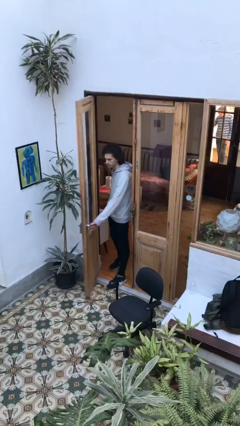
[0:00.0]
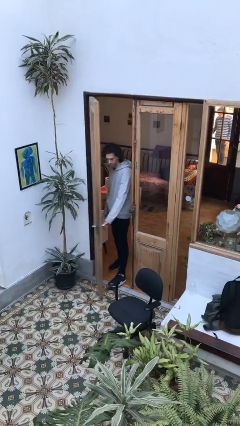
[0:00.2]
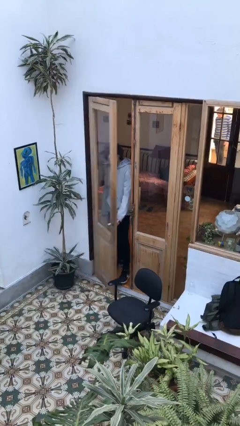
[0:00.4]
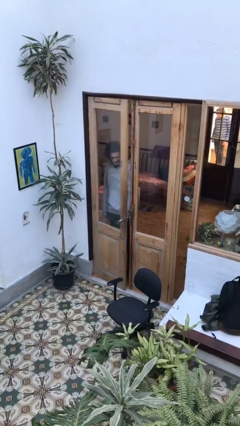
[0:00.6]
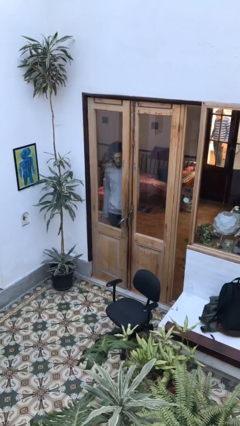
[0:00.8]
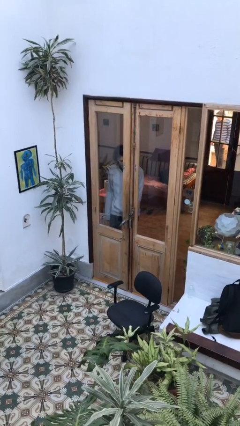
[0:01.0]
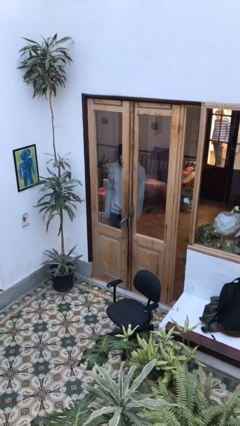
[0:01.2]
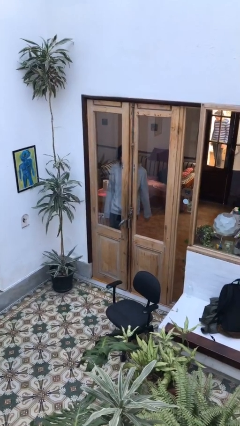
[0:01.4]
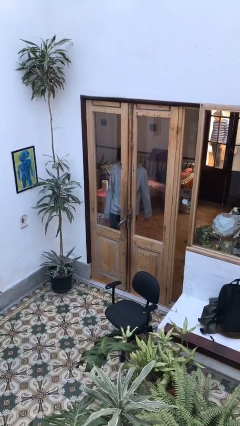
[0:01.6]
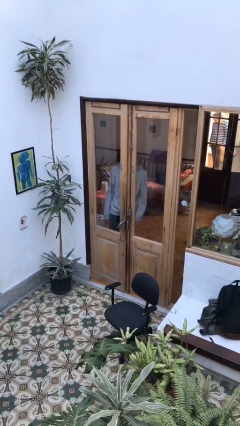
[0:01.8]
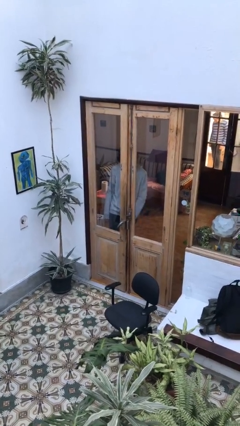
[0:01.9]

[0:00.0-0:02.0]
person closes facility door

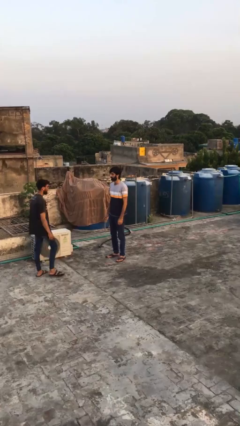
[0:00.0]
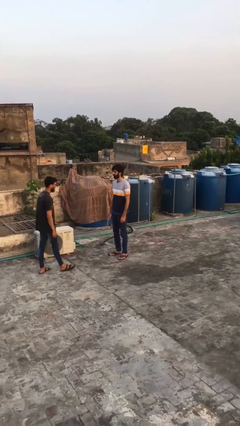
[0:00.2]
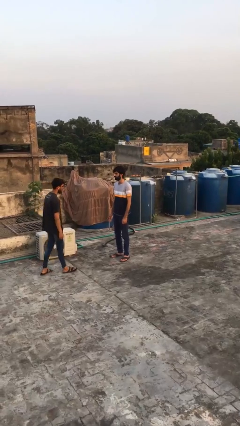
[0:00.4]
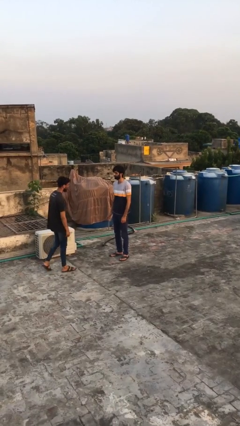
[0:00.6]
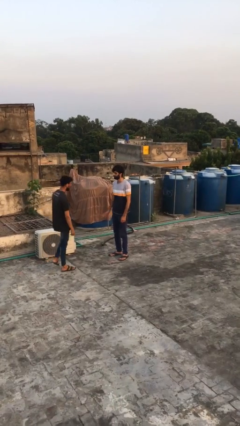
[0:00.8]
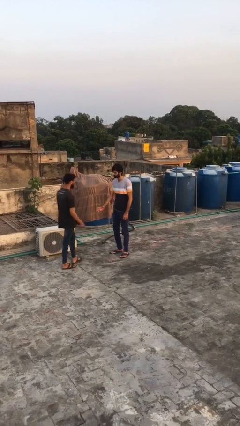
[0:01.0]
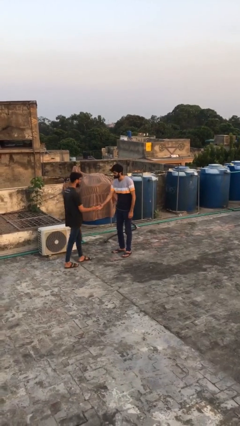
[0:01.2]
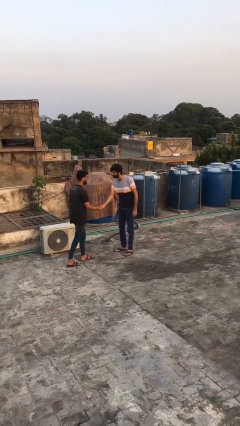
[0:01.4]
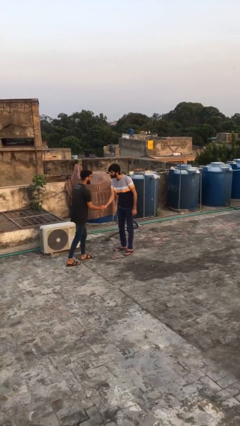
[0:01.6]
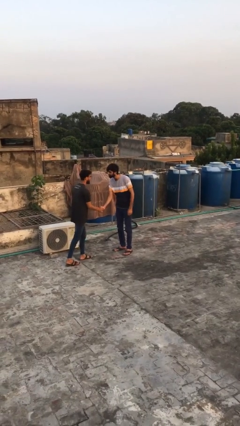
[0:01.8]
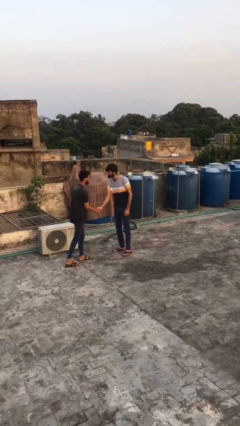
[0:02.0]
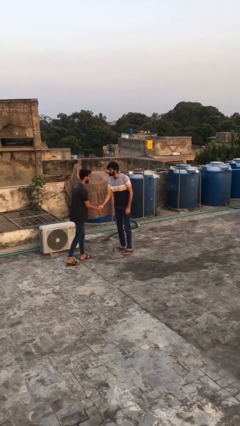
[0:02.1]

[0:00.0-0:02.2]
person shakes hand

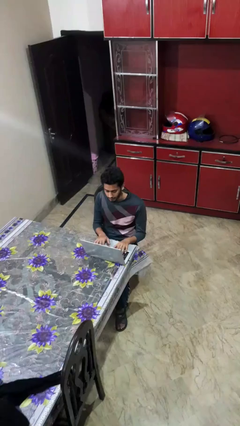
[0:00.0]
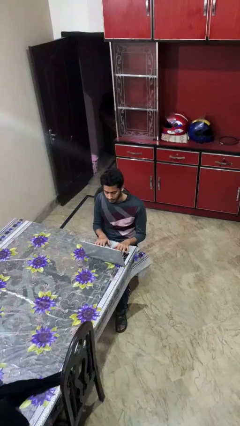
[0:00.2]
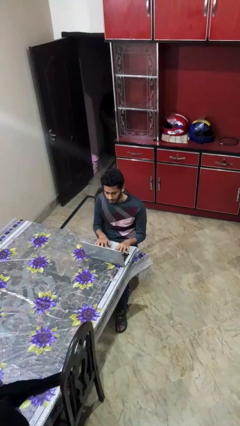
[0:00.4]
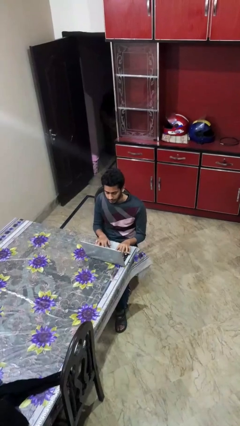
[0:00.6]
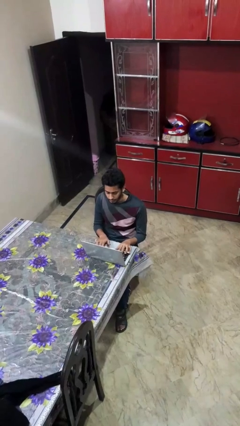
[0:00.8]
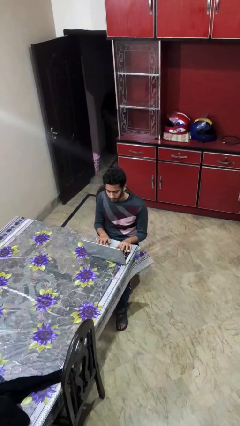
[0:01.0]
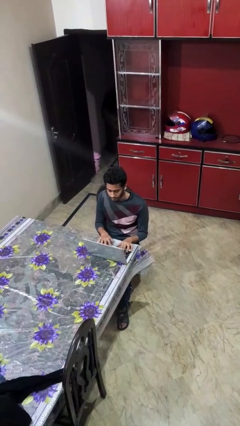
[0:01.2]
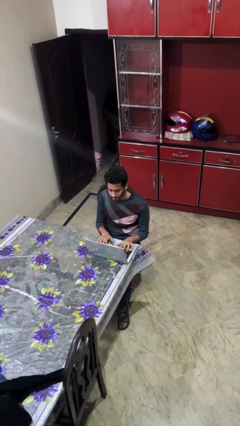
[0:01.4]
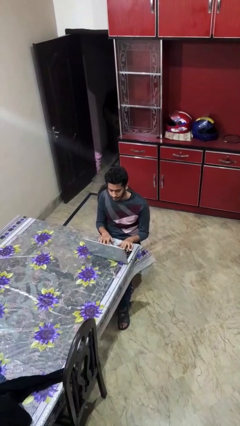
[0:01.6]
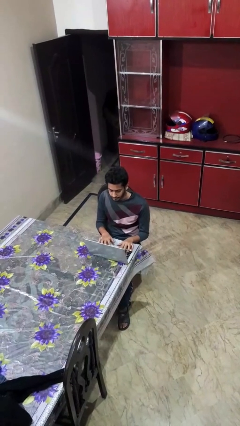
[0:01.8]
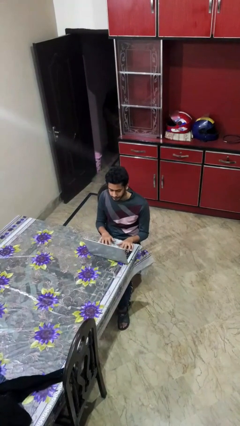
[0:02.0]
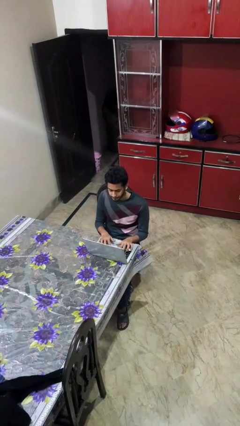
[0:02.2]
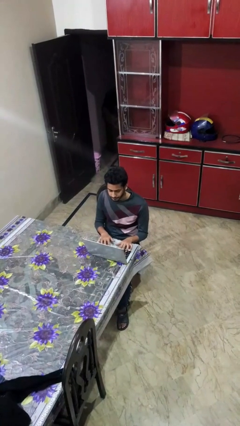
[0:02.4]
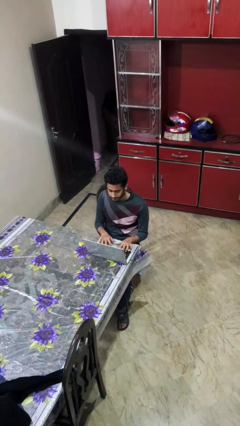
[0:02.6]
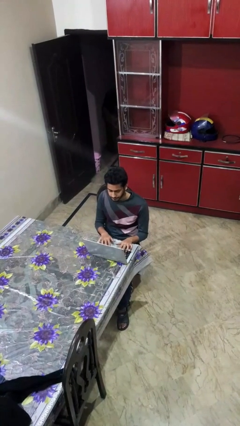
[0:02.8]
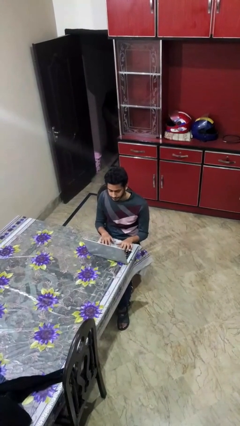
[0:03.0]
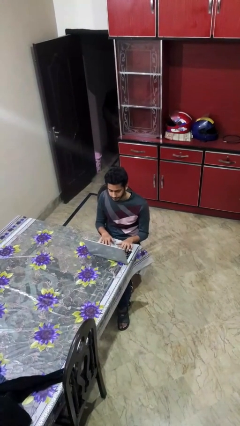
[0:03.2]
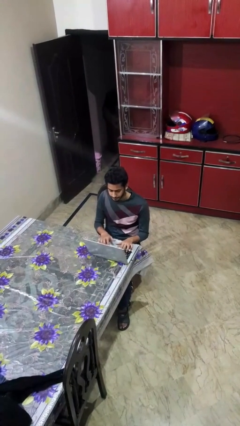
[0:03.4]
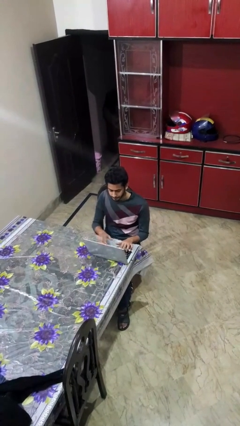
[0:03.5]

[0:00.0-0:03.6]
person interacts with laptop

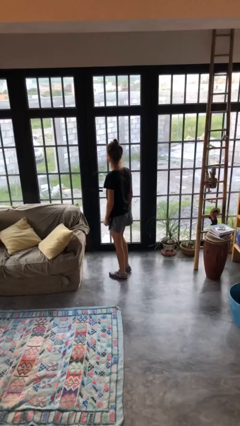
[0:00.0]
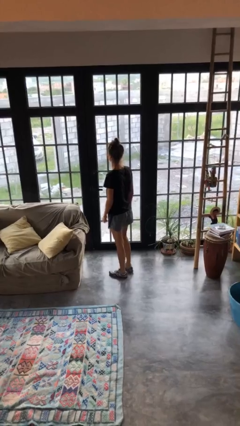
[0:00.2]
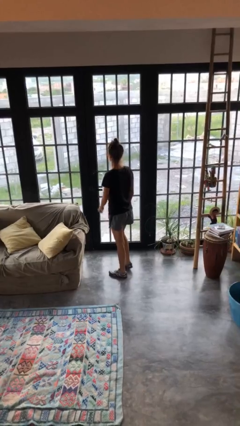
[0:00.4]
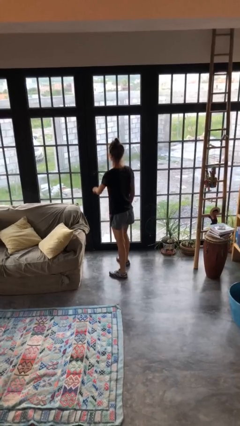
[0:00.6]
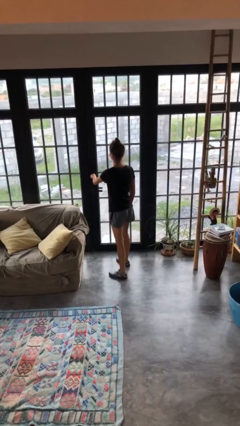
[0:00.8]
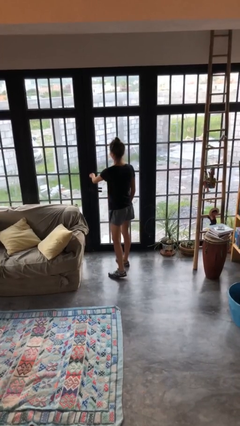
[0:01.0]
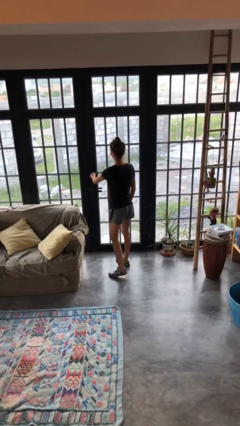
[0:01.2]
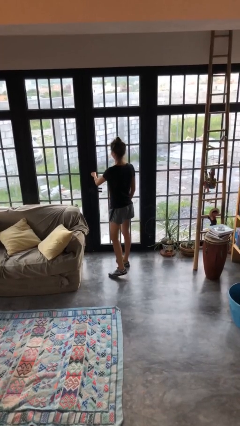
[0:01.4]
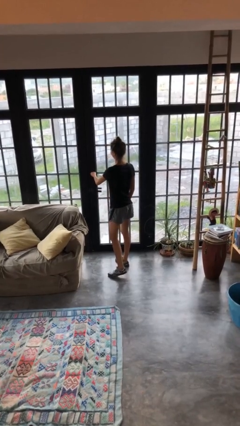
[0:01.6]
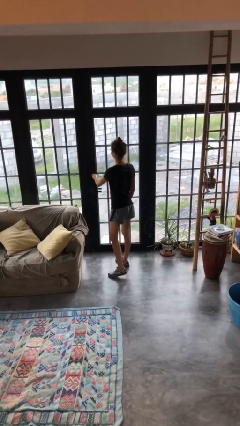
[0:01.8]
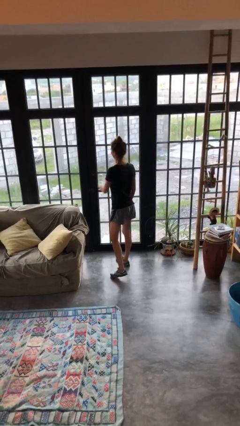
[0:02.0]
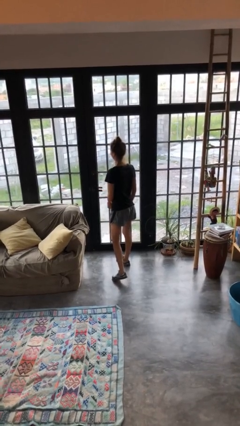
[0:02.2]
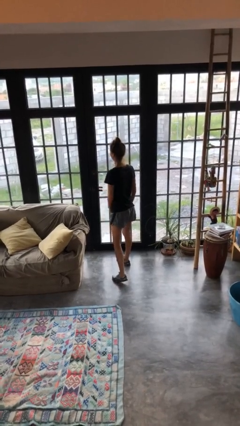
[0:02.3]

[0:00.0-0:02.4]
person locks door with keys

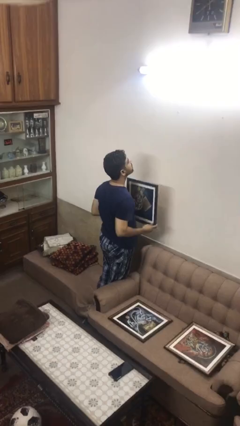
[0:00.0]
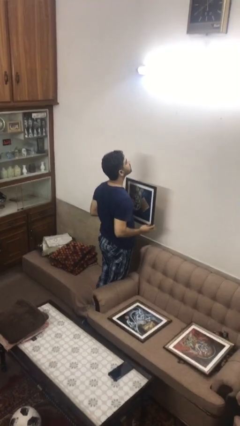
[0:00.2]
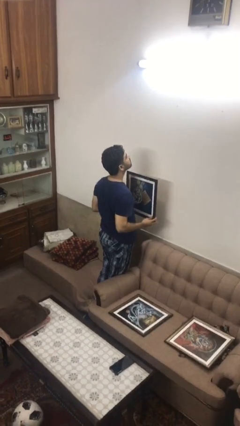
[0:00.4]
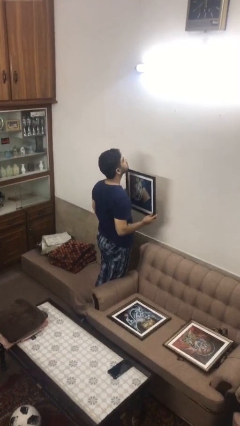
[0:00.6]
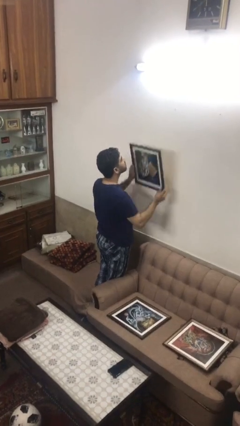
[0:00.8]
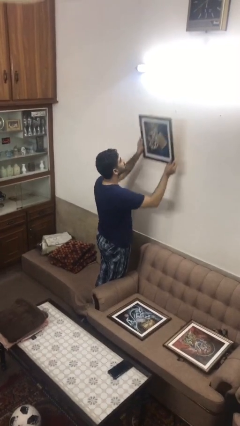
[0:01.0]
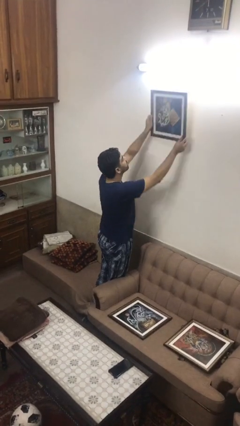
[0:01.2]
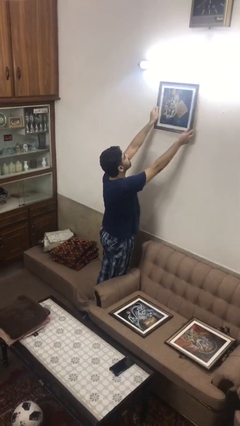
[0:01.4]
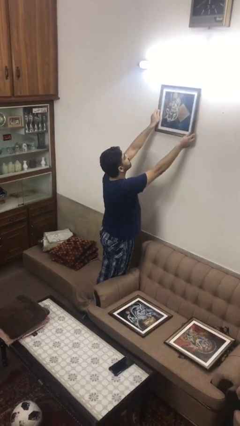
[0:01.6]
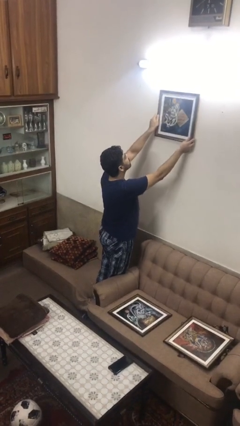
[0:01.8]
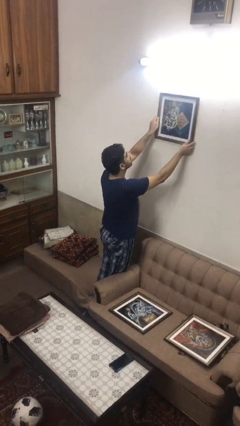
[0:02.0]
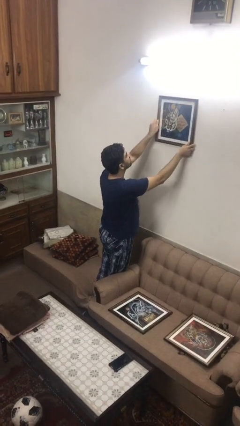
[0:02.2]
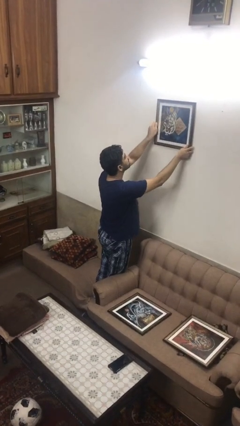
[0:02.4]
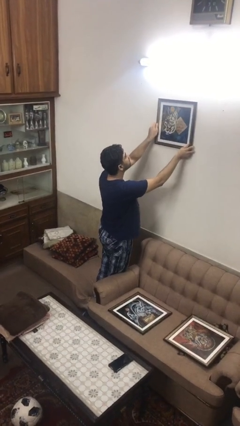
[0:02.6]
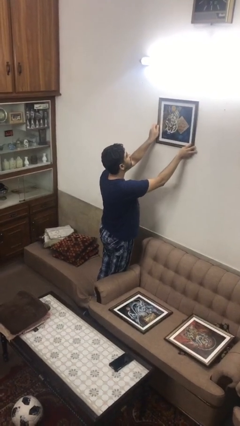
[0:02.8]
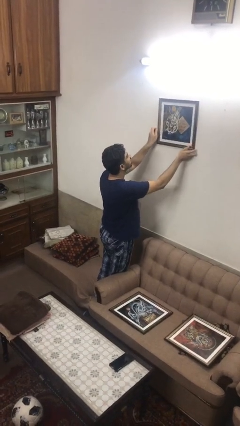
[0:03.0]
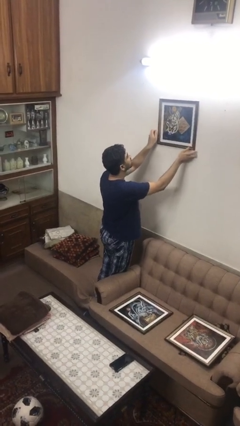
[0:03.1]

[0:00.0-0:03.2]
person puts up picture frame

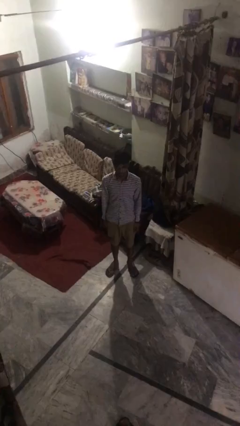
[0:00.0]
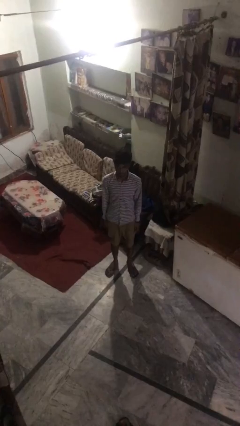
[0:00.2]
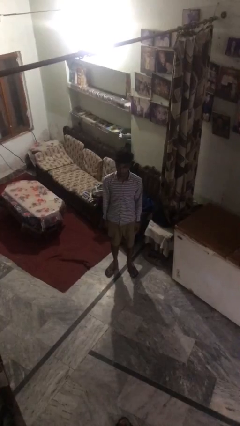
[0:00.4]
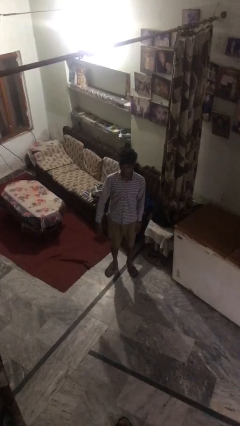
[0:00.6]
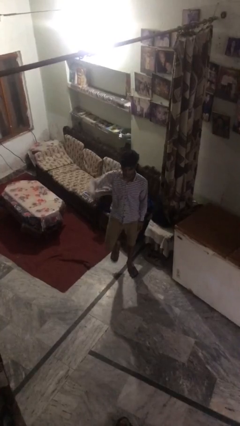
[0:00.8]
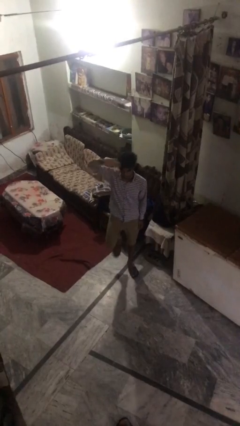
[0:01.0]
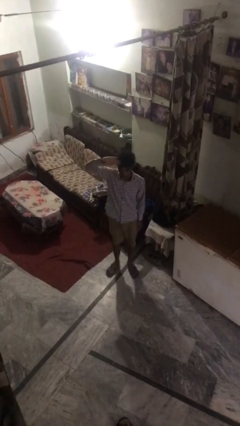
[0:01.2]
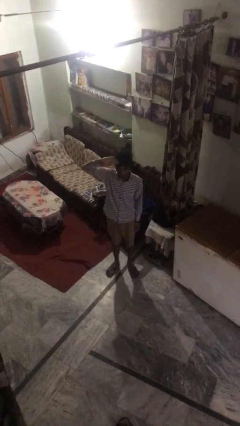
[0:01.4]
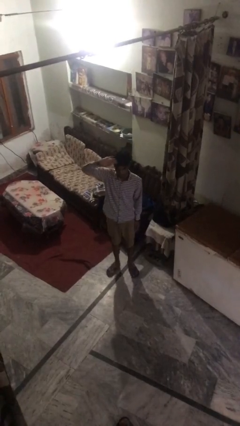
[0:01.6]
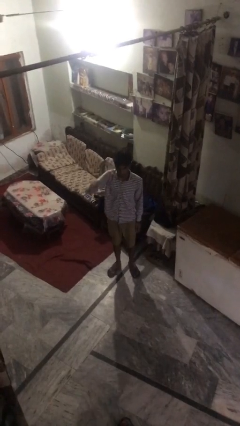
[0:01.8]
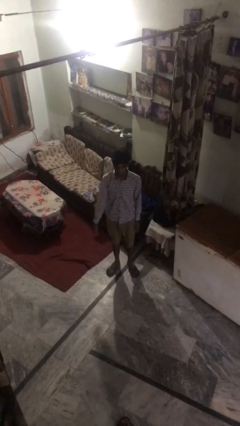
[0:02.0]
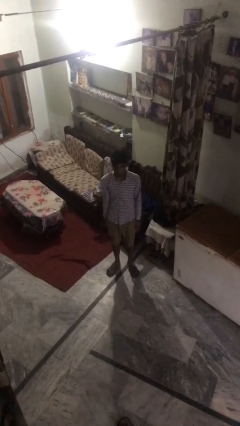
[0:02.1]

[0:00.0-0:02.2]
person salutes

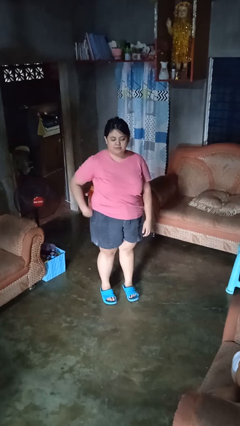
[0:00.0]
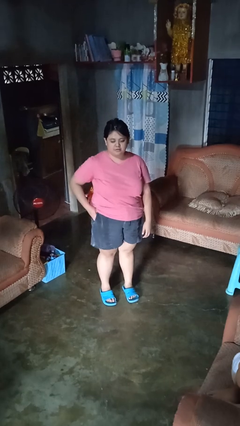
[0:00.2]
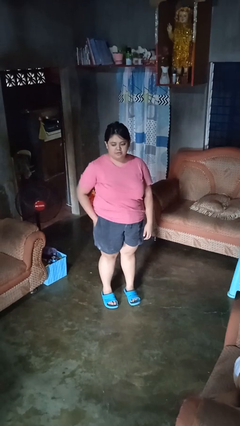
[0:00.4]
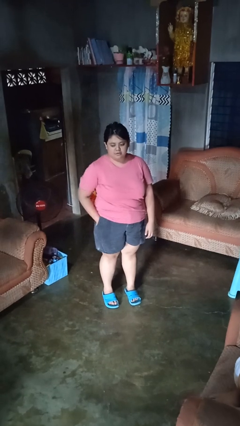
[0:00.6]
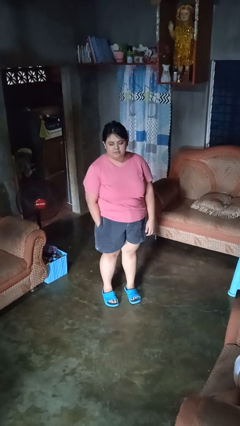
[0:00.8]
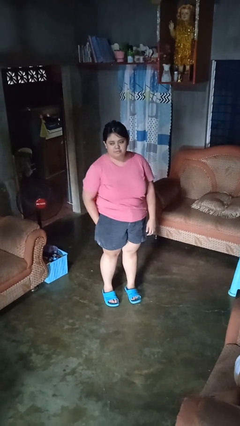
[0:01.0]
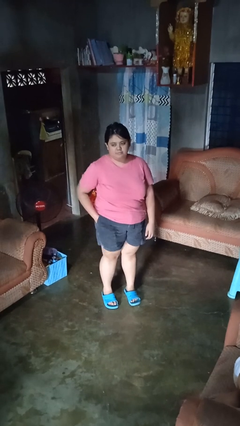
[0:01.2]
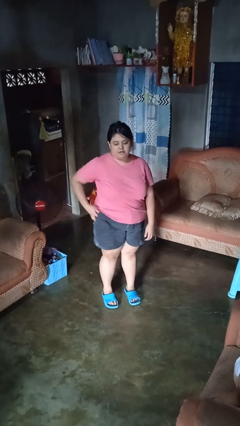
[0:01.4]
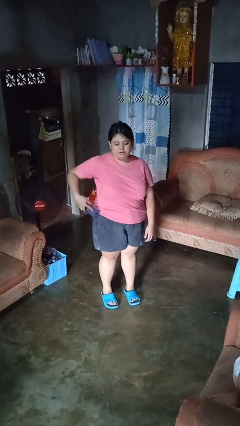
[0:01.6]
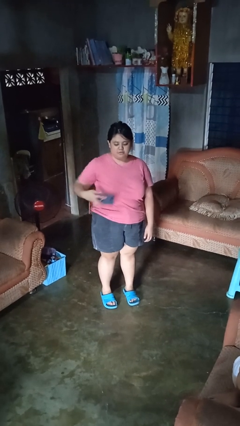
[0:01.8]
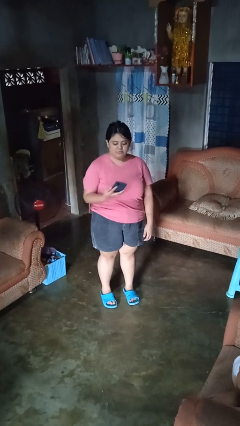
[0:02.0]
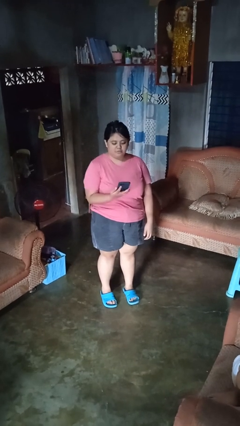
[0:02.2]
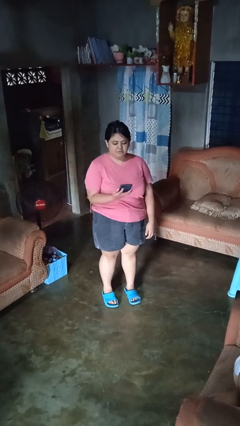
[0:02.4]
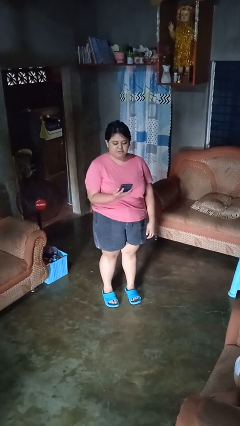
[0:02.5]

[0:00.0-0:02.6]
person takes phone from pocket
